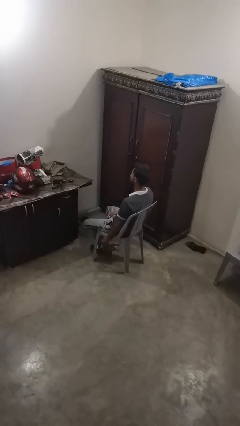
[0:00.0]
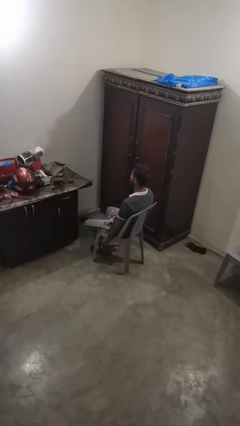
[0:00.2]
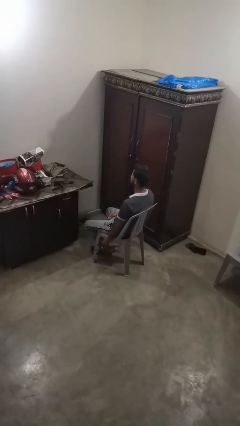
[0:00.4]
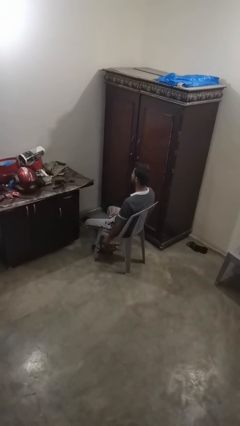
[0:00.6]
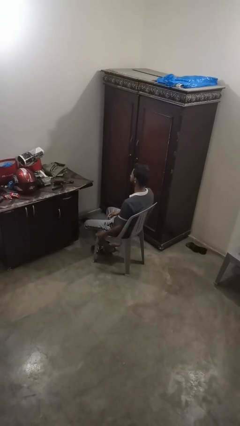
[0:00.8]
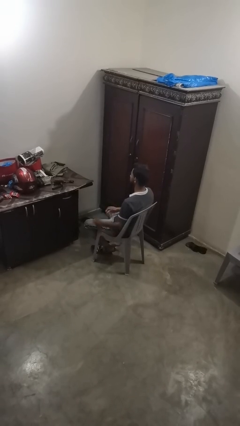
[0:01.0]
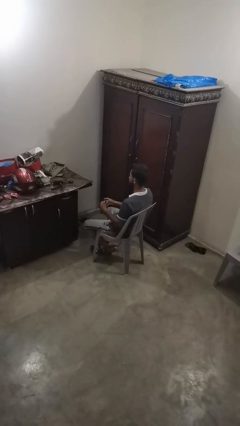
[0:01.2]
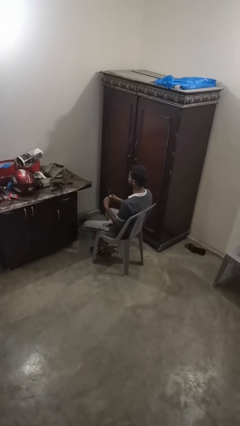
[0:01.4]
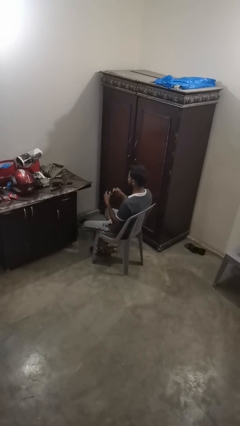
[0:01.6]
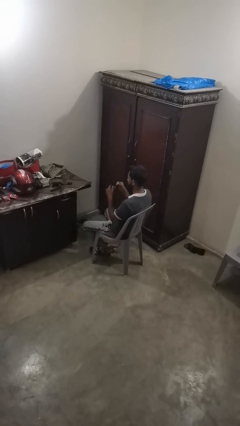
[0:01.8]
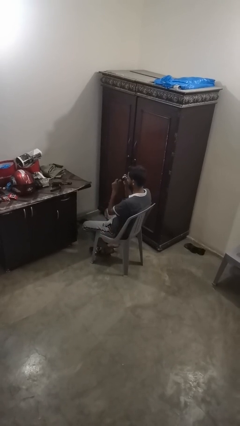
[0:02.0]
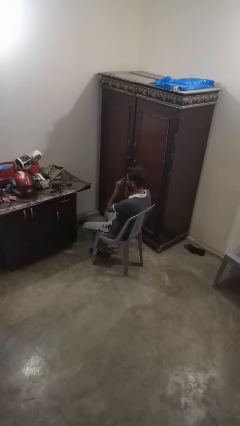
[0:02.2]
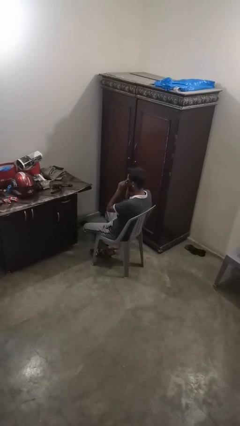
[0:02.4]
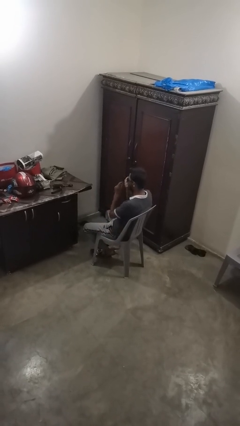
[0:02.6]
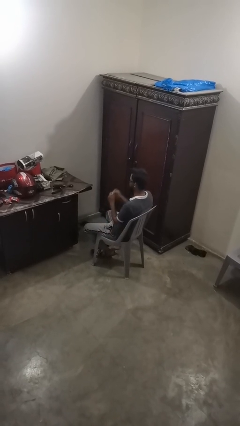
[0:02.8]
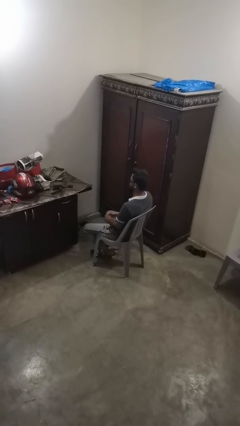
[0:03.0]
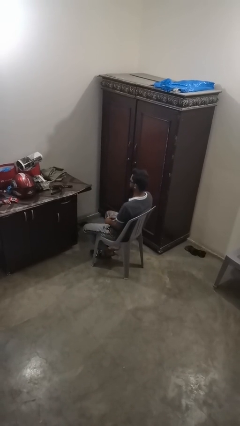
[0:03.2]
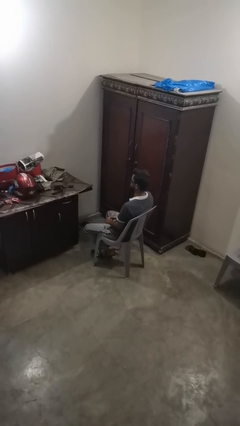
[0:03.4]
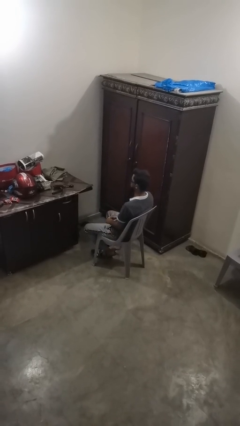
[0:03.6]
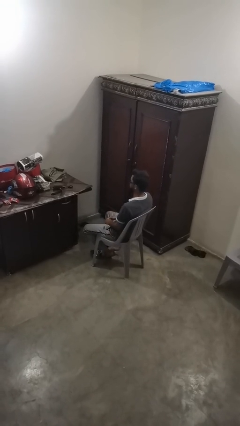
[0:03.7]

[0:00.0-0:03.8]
person puts on sunglasses

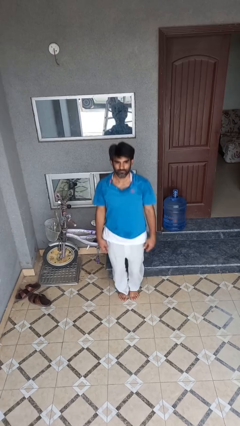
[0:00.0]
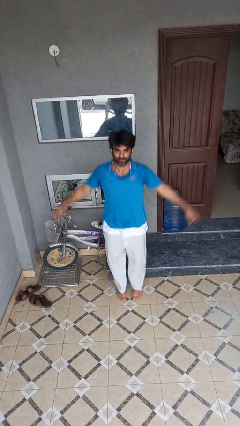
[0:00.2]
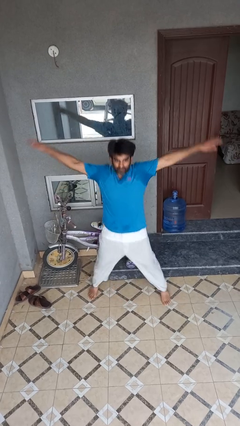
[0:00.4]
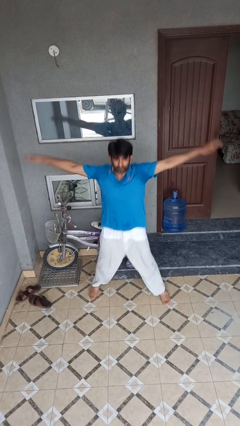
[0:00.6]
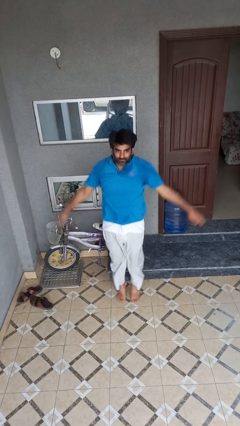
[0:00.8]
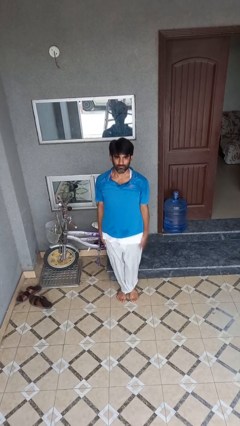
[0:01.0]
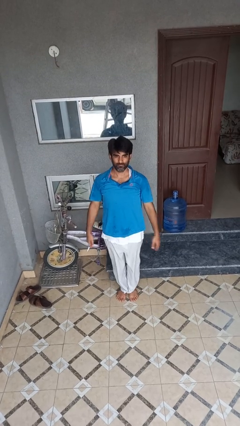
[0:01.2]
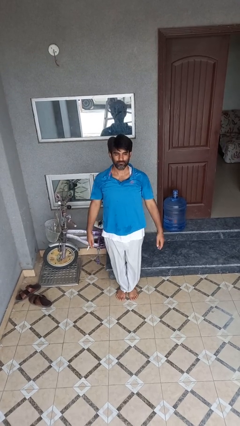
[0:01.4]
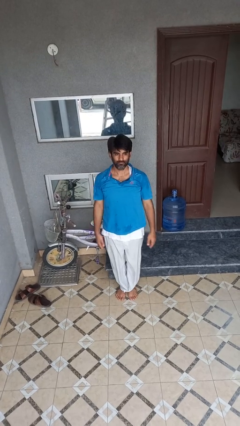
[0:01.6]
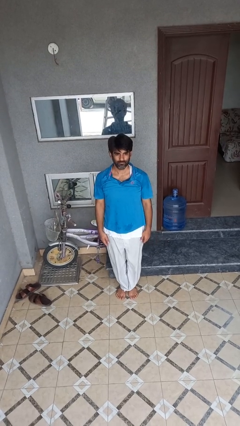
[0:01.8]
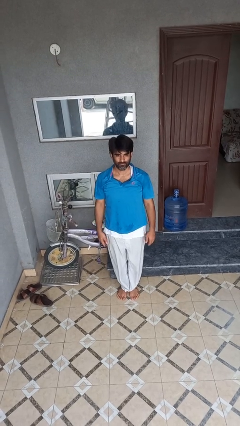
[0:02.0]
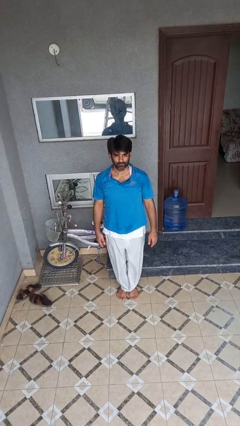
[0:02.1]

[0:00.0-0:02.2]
person exercises with jumping jacks

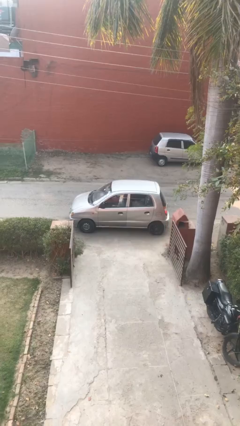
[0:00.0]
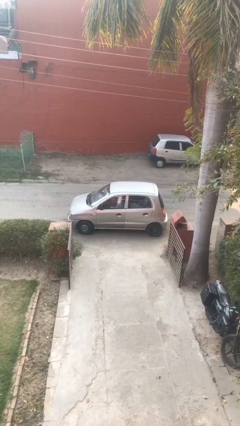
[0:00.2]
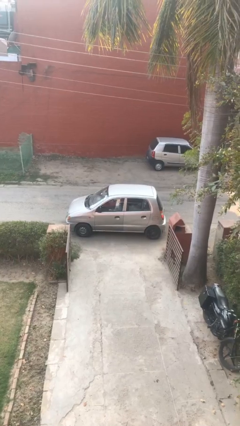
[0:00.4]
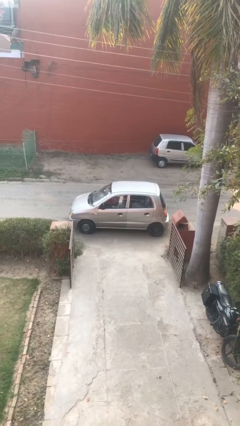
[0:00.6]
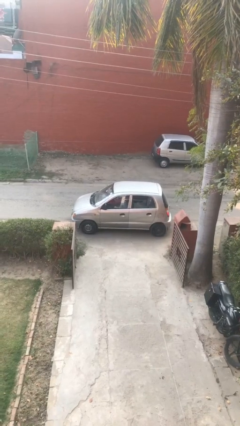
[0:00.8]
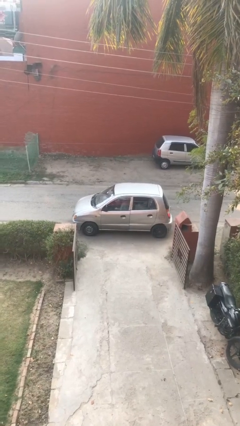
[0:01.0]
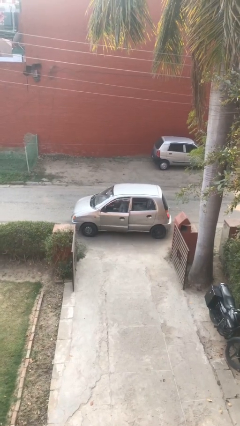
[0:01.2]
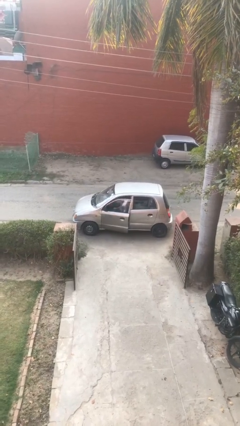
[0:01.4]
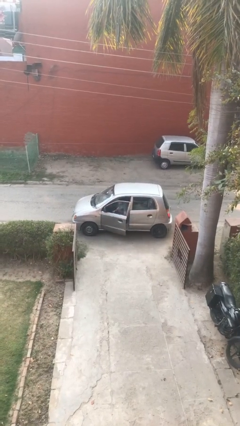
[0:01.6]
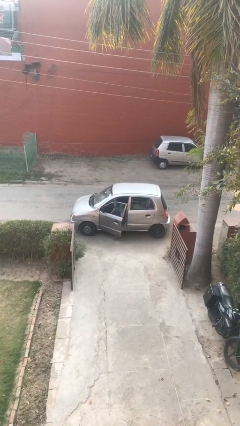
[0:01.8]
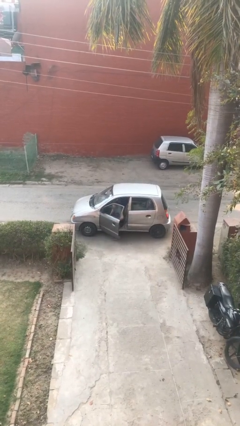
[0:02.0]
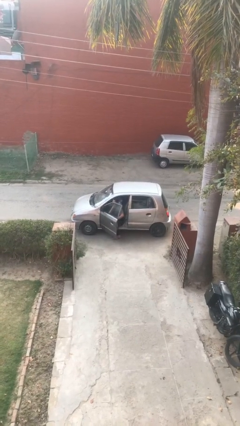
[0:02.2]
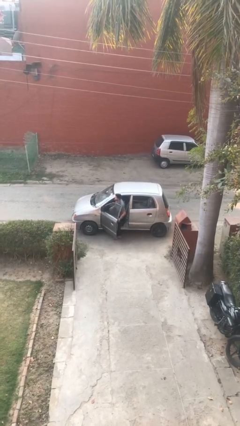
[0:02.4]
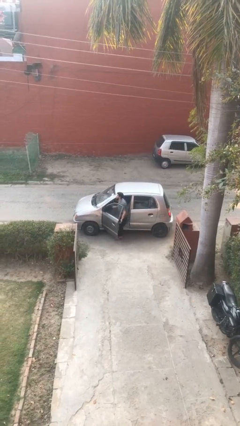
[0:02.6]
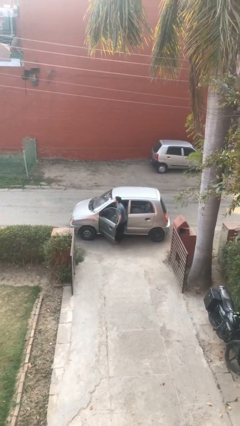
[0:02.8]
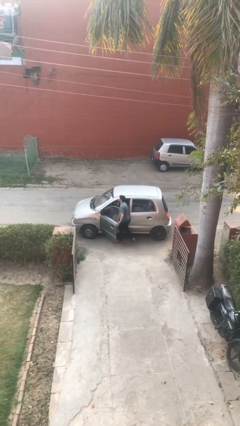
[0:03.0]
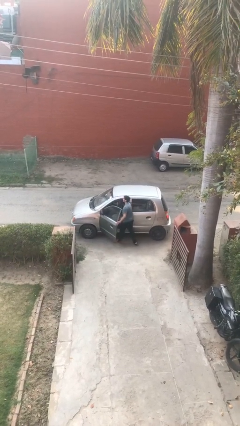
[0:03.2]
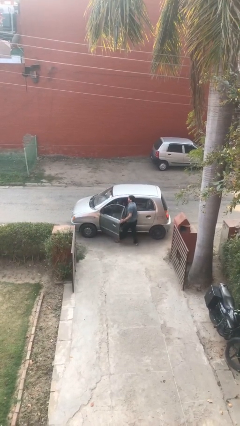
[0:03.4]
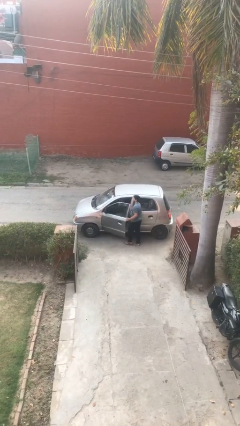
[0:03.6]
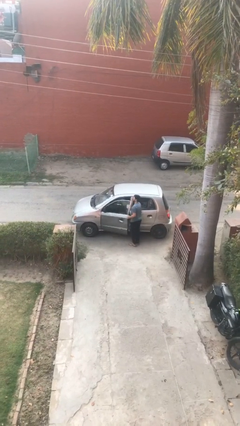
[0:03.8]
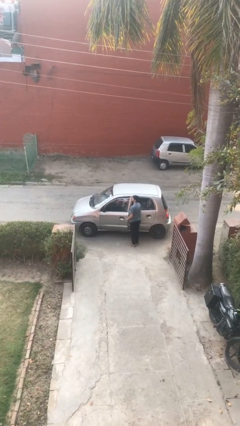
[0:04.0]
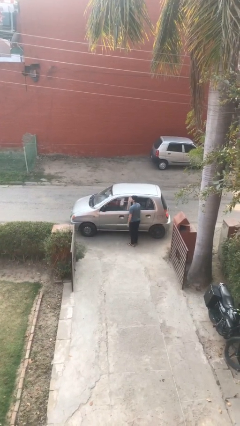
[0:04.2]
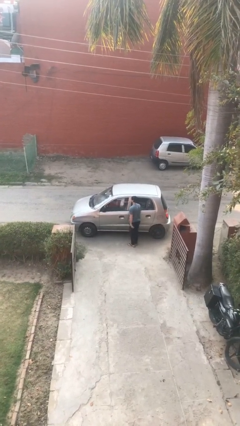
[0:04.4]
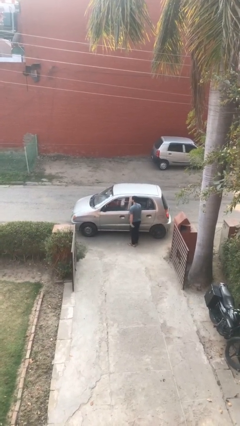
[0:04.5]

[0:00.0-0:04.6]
car drops off person

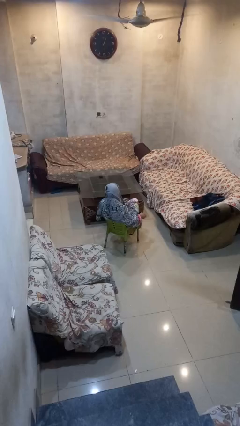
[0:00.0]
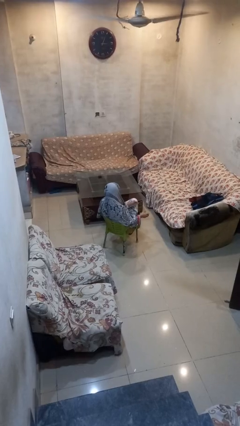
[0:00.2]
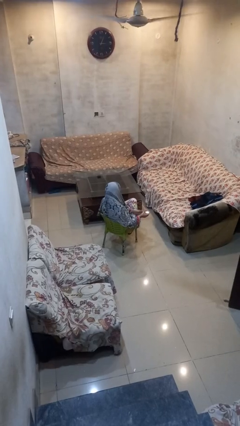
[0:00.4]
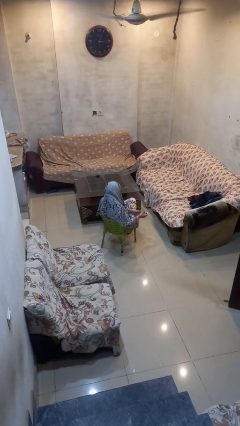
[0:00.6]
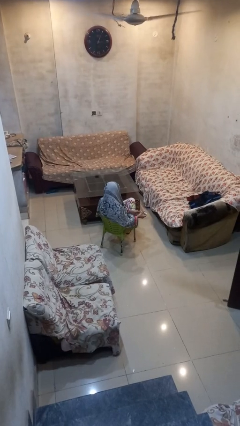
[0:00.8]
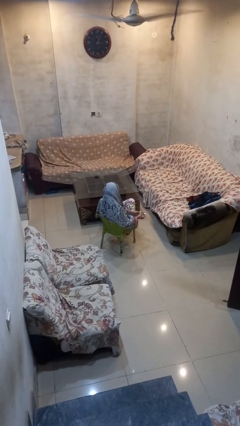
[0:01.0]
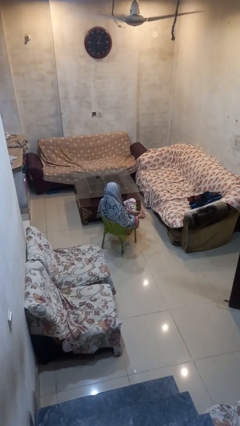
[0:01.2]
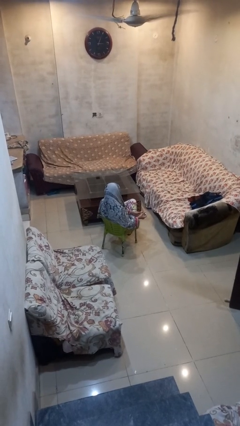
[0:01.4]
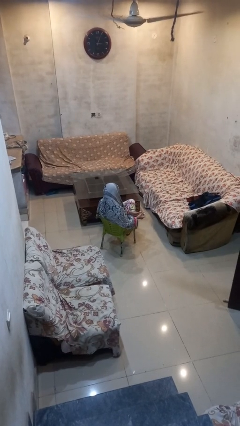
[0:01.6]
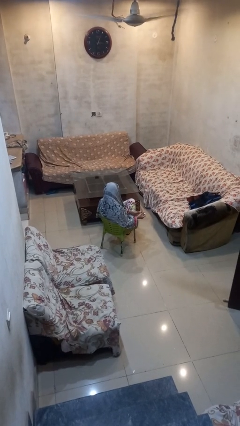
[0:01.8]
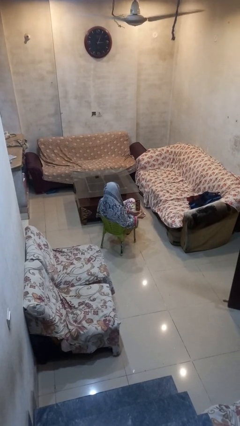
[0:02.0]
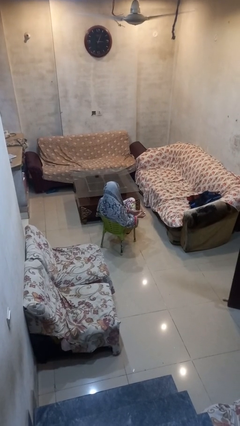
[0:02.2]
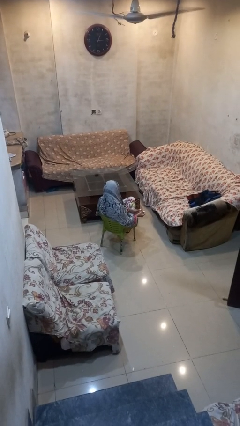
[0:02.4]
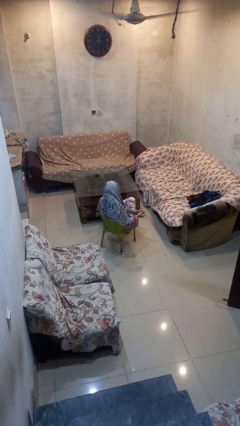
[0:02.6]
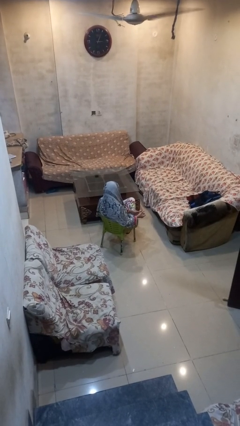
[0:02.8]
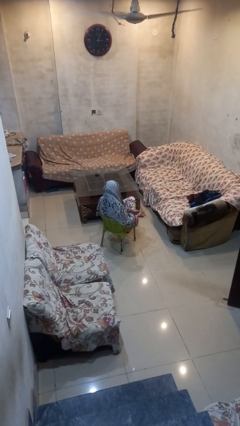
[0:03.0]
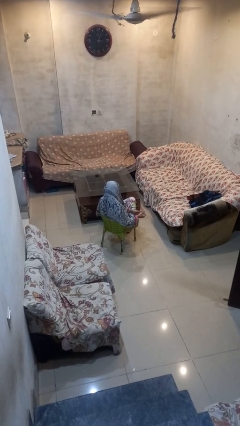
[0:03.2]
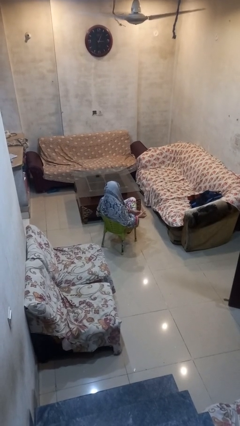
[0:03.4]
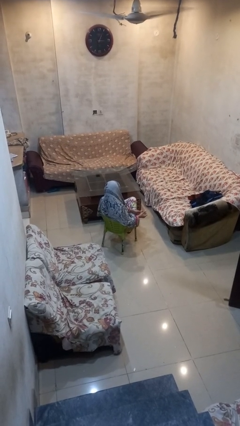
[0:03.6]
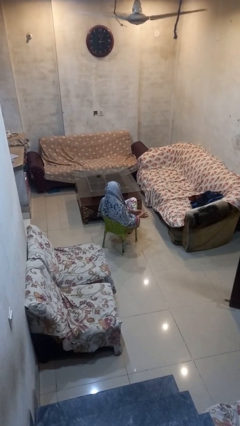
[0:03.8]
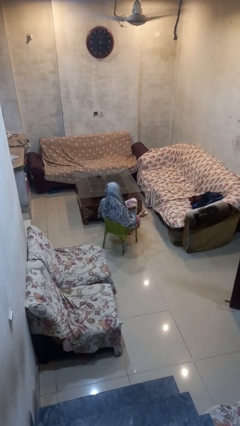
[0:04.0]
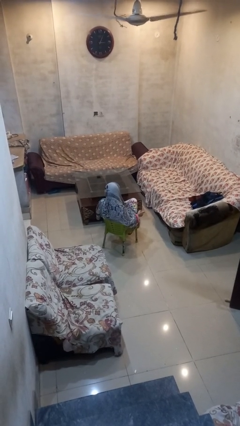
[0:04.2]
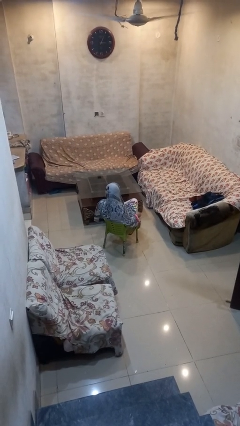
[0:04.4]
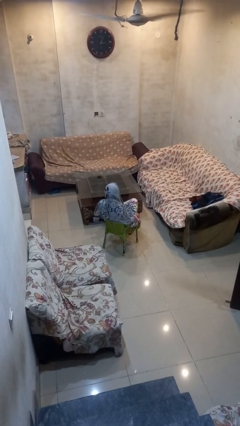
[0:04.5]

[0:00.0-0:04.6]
person clips fingernails

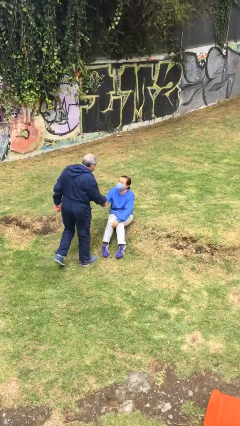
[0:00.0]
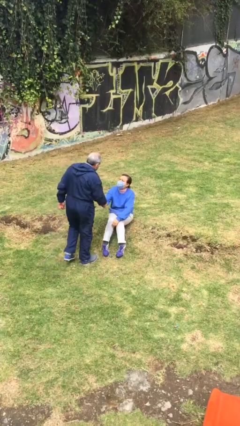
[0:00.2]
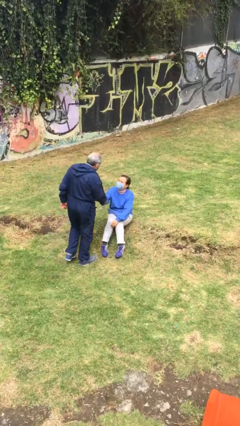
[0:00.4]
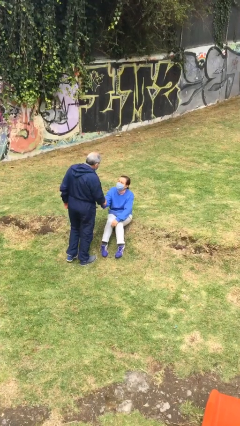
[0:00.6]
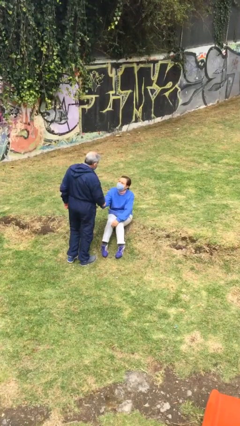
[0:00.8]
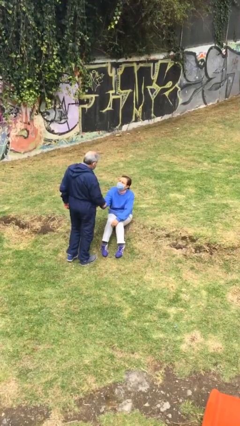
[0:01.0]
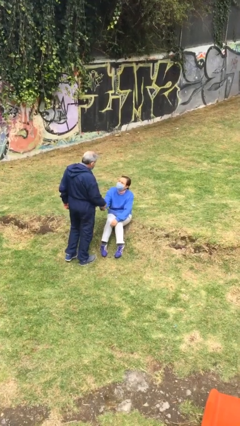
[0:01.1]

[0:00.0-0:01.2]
person shakes hand

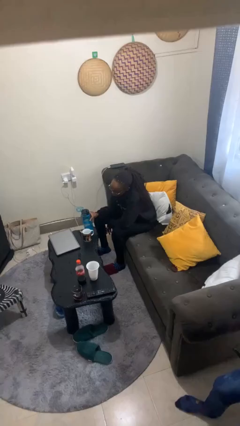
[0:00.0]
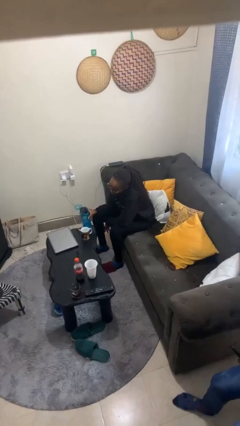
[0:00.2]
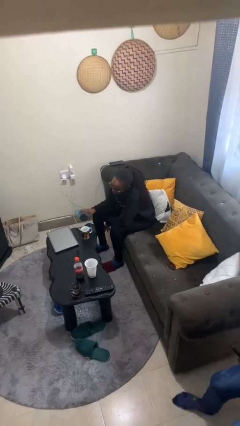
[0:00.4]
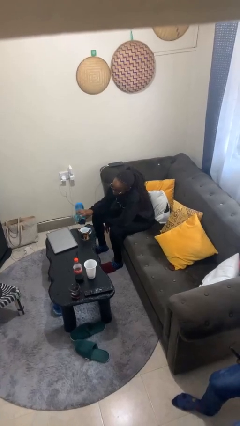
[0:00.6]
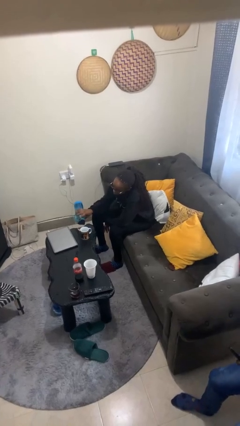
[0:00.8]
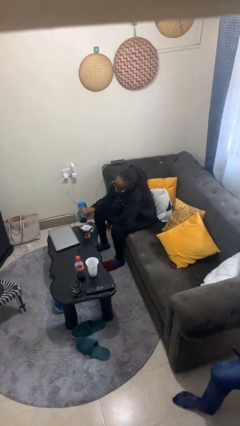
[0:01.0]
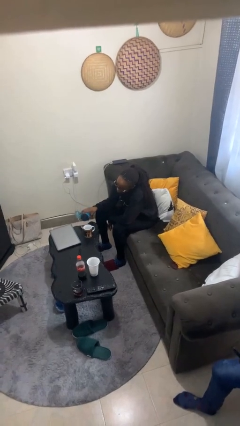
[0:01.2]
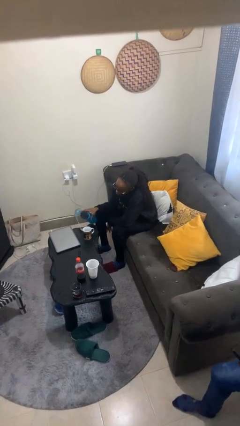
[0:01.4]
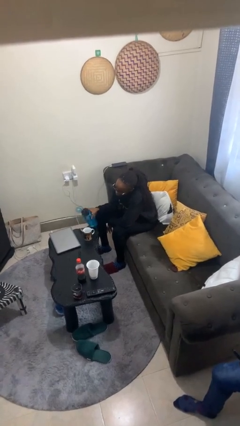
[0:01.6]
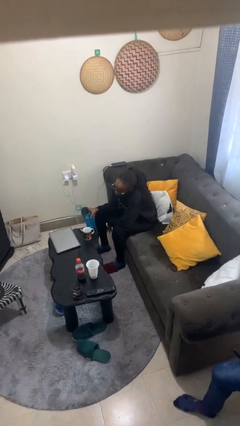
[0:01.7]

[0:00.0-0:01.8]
person pours liquid into cup
